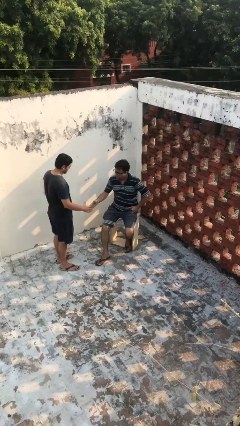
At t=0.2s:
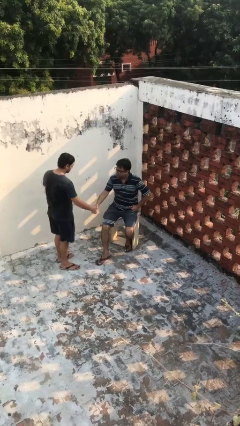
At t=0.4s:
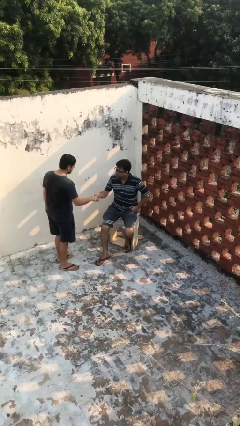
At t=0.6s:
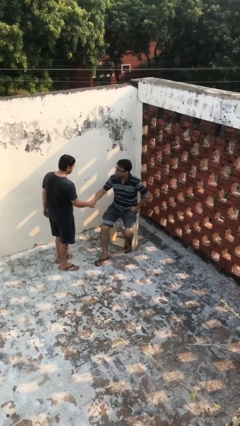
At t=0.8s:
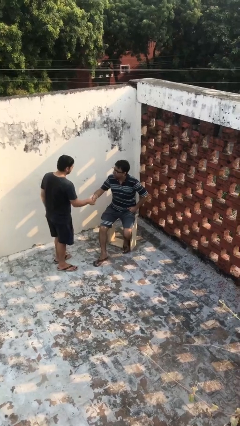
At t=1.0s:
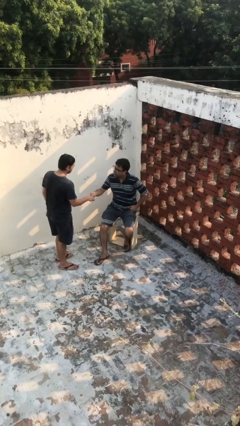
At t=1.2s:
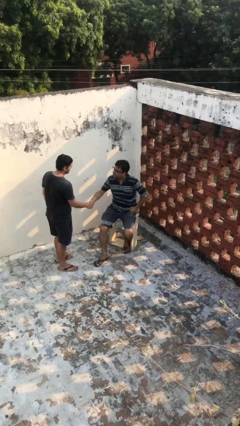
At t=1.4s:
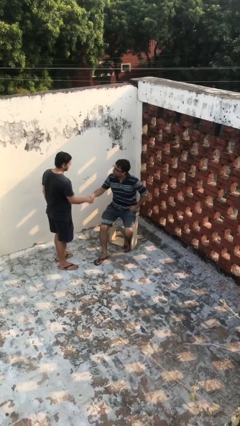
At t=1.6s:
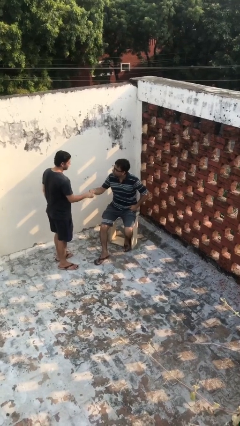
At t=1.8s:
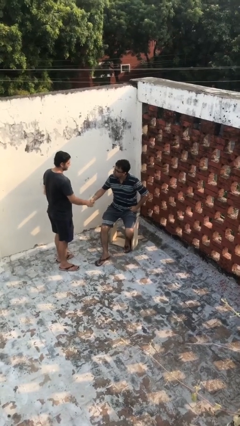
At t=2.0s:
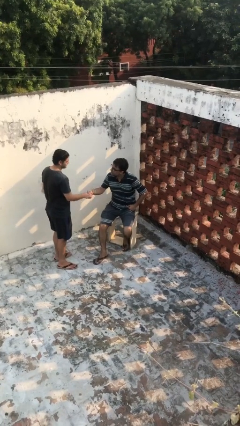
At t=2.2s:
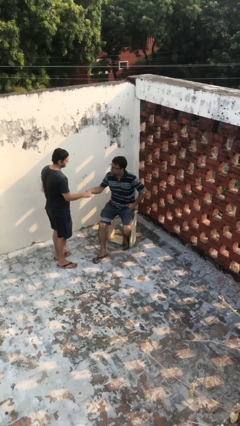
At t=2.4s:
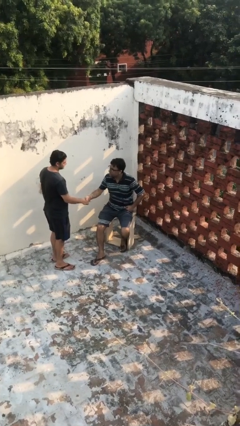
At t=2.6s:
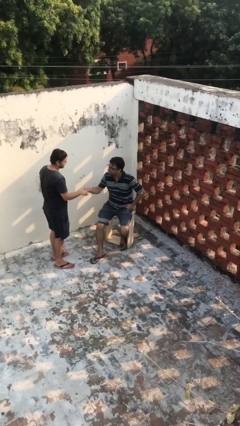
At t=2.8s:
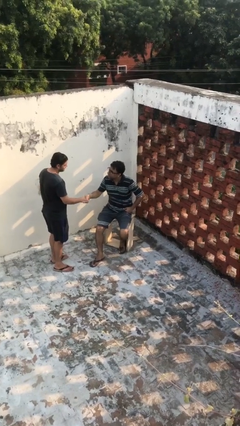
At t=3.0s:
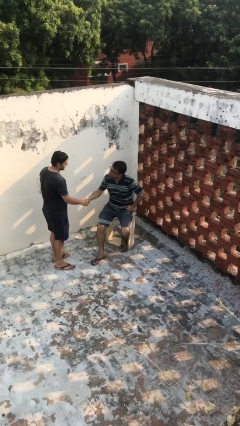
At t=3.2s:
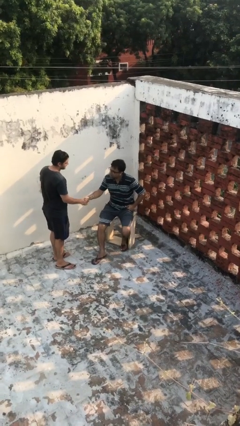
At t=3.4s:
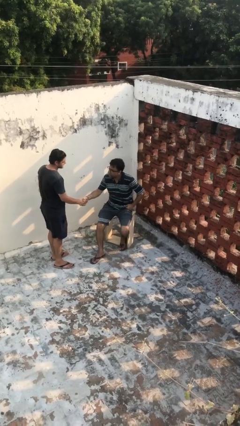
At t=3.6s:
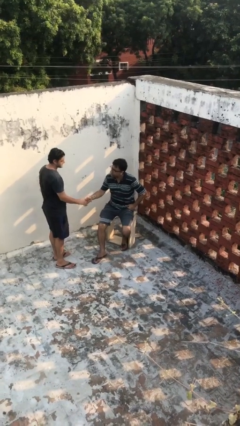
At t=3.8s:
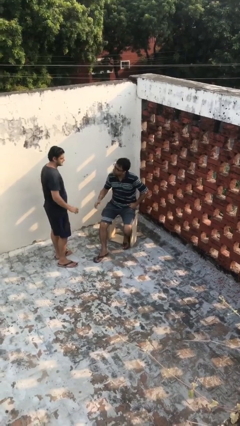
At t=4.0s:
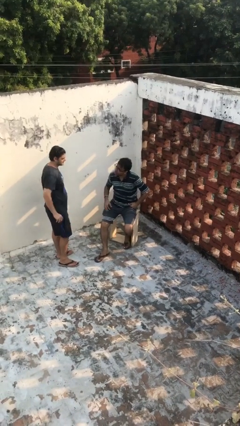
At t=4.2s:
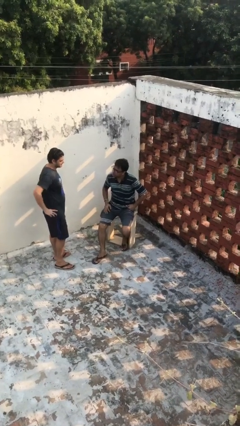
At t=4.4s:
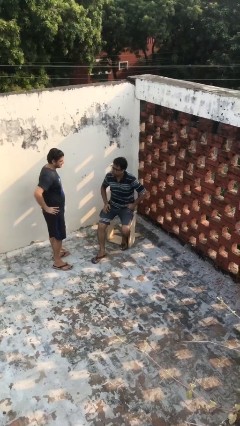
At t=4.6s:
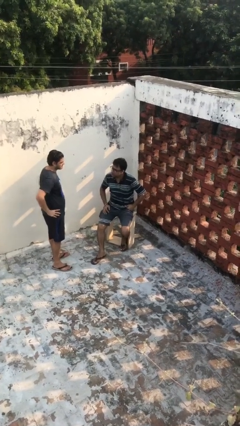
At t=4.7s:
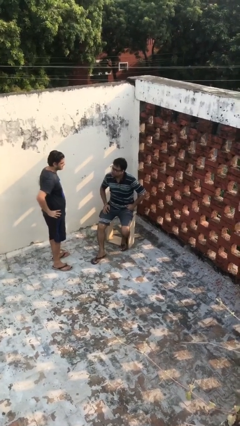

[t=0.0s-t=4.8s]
person shakes hand

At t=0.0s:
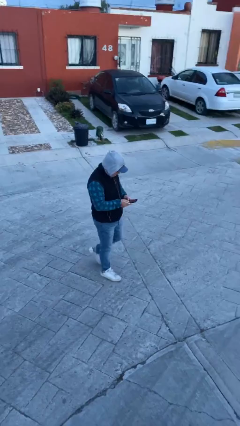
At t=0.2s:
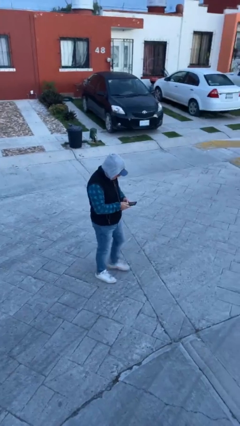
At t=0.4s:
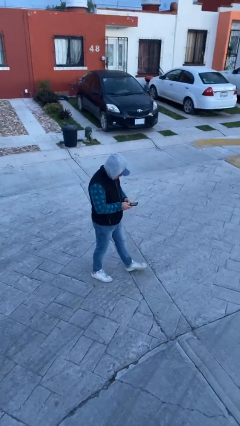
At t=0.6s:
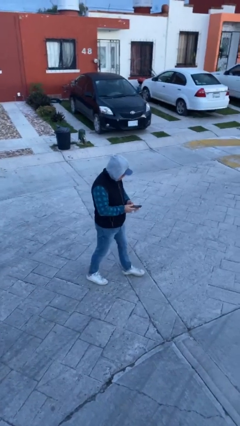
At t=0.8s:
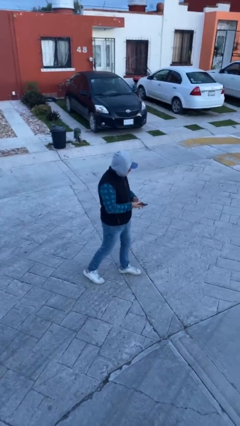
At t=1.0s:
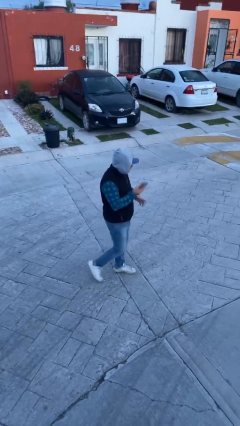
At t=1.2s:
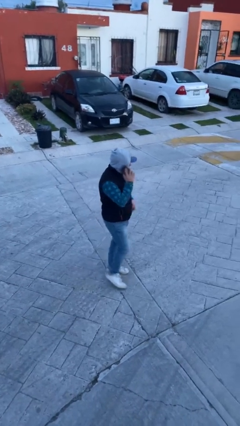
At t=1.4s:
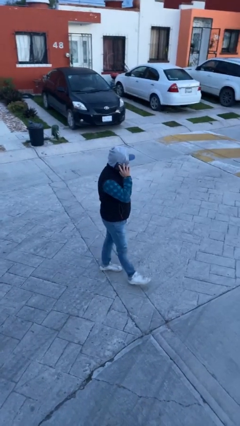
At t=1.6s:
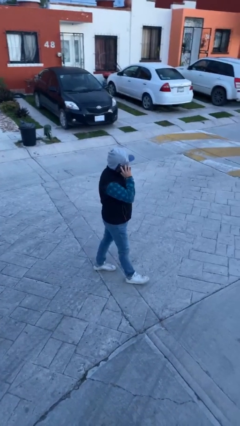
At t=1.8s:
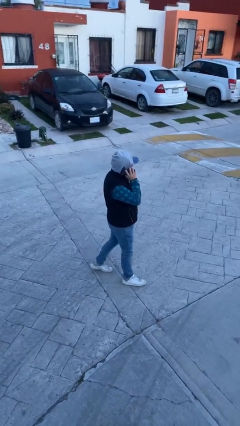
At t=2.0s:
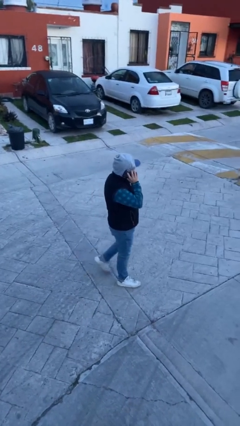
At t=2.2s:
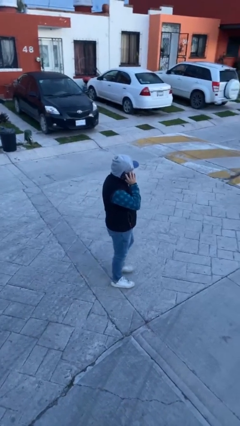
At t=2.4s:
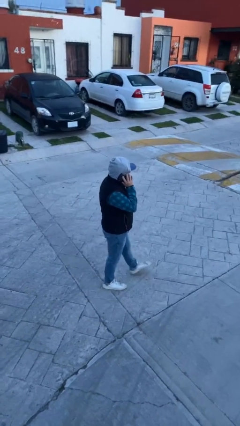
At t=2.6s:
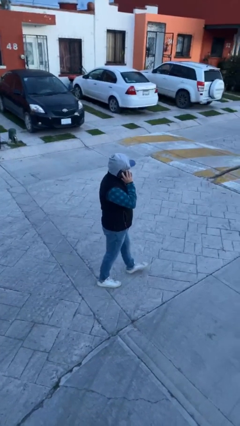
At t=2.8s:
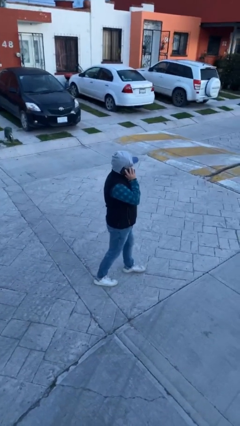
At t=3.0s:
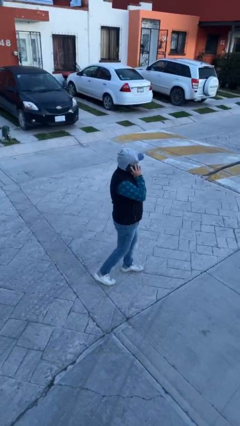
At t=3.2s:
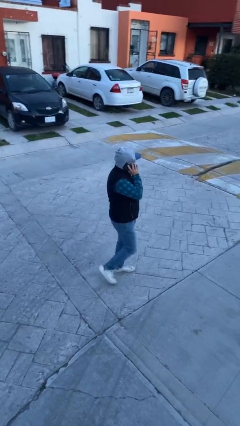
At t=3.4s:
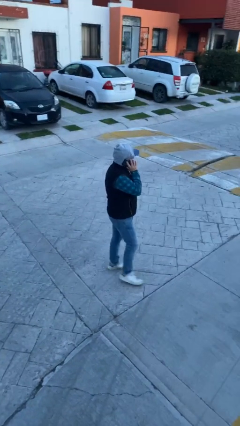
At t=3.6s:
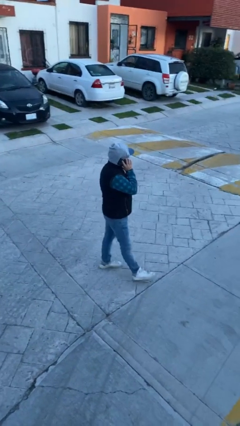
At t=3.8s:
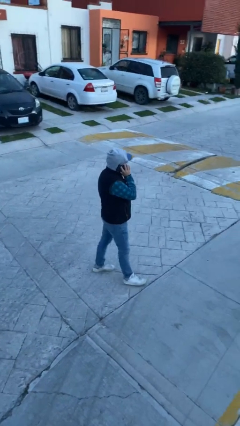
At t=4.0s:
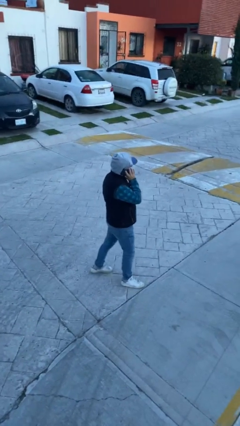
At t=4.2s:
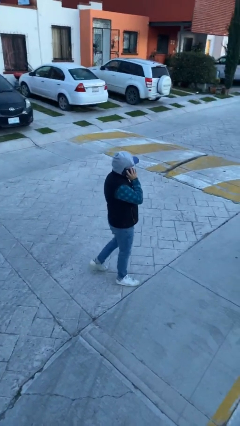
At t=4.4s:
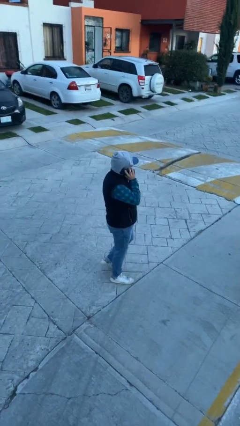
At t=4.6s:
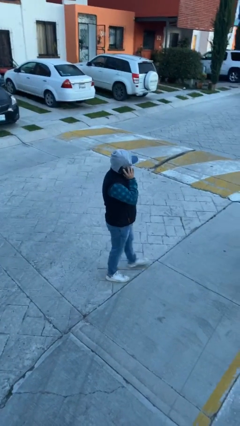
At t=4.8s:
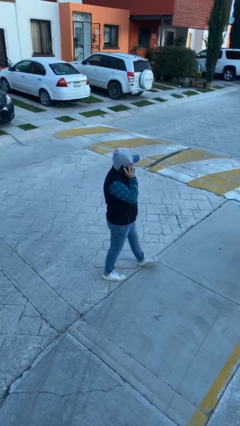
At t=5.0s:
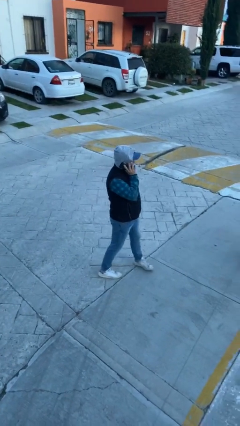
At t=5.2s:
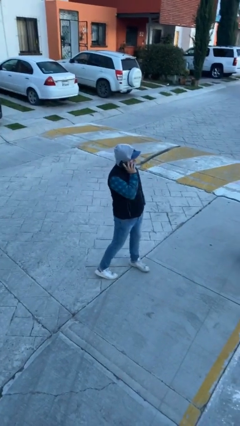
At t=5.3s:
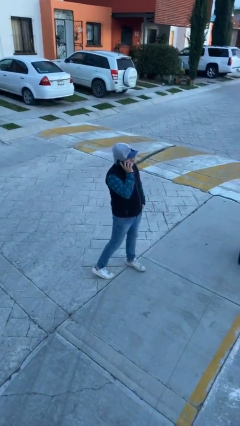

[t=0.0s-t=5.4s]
person talks on phone

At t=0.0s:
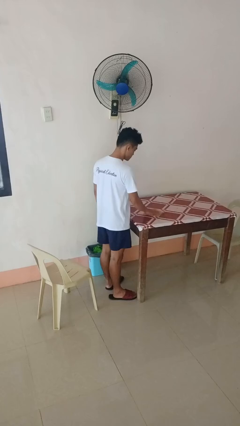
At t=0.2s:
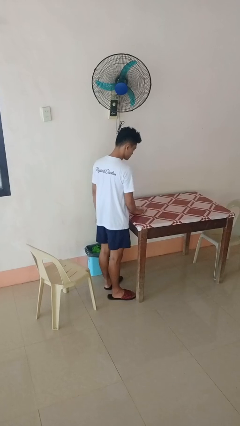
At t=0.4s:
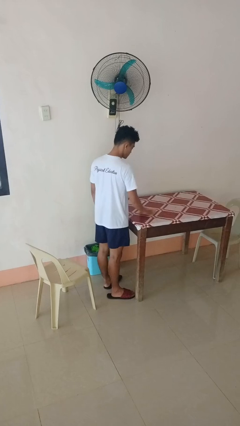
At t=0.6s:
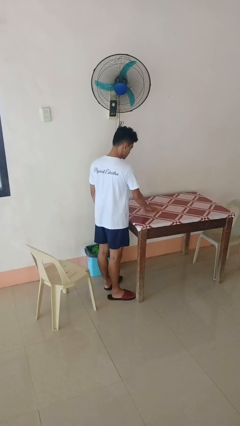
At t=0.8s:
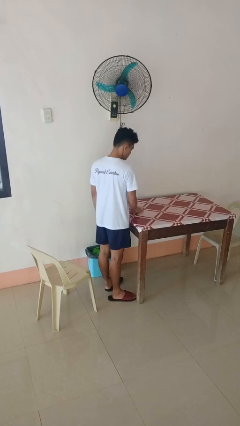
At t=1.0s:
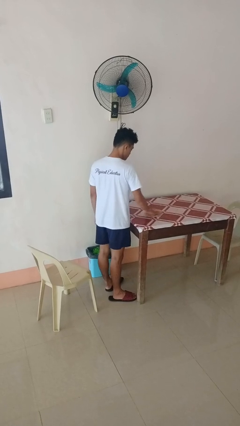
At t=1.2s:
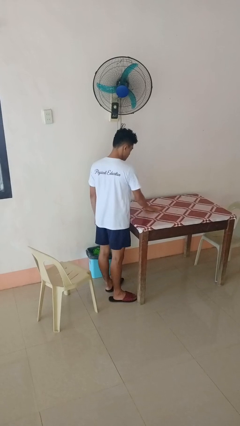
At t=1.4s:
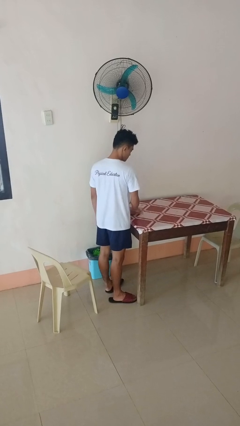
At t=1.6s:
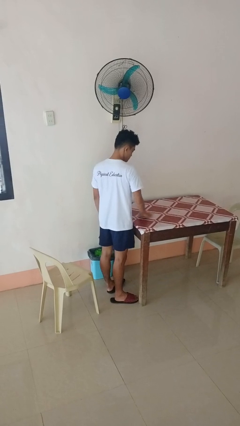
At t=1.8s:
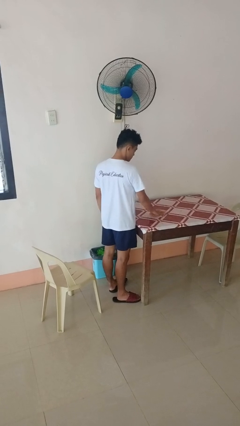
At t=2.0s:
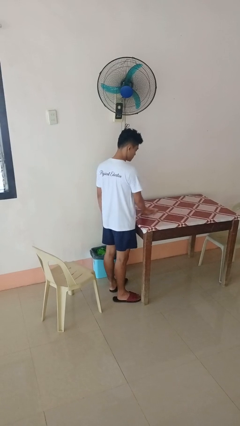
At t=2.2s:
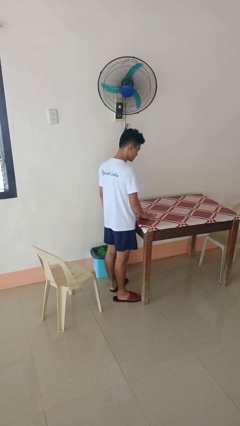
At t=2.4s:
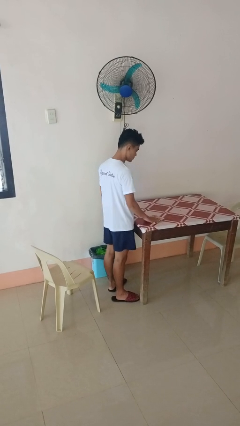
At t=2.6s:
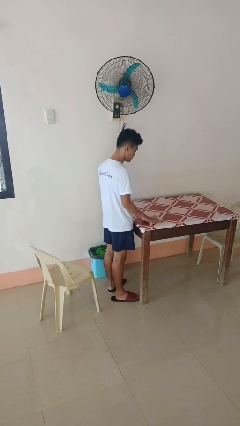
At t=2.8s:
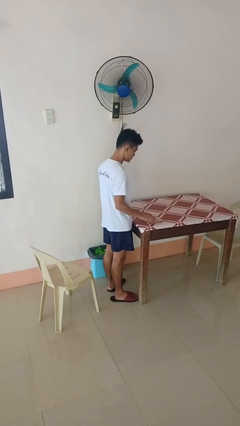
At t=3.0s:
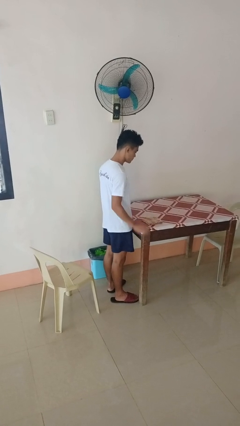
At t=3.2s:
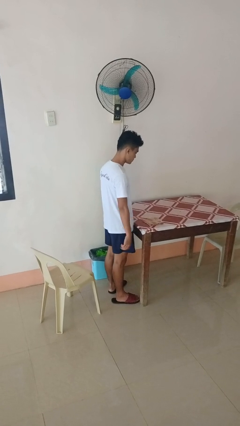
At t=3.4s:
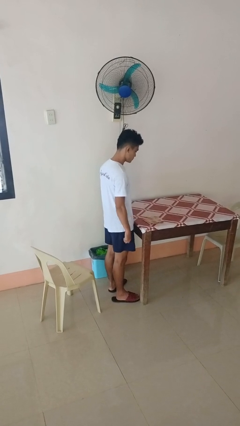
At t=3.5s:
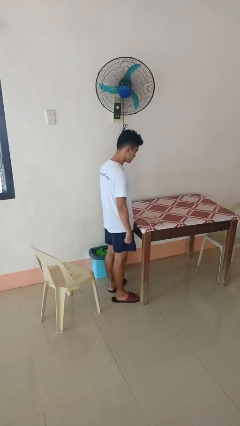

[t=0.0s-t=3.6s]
person cleans table with rag

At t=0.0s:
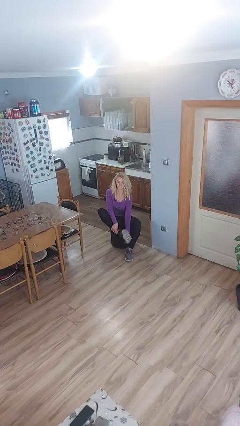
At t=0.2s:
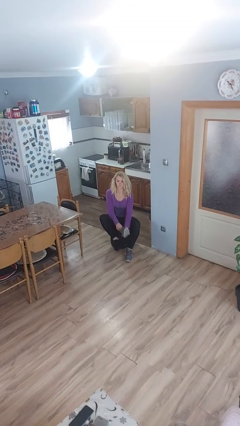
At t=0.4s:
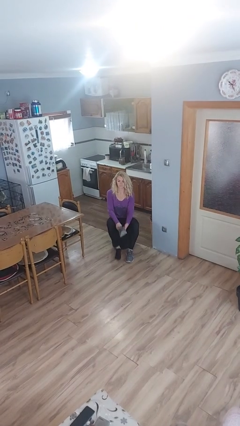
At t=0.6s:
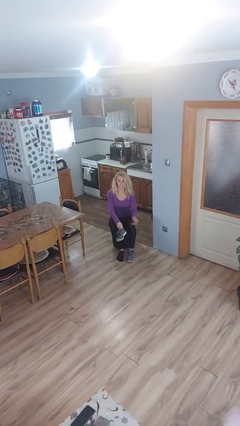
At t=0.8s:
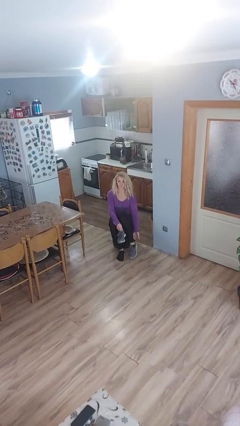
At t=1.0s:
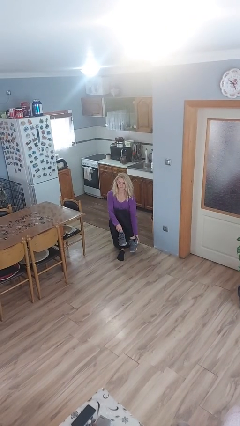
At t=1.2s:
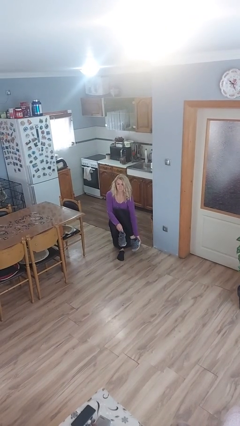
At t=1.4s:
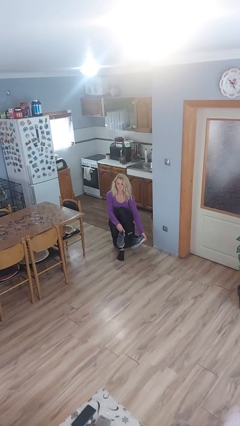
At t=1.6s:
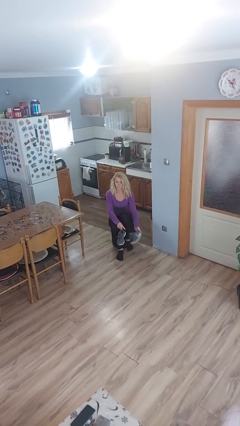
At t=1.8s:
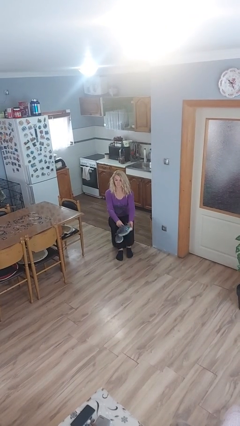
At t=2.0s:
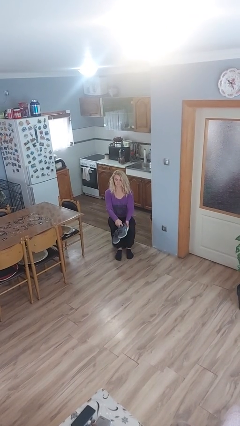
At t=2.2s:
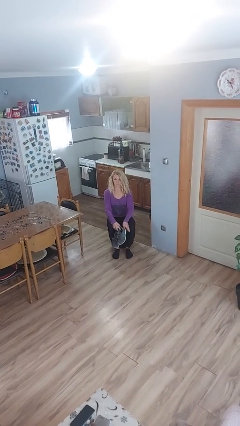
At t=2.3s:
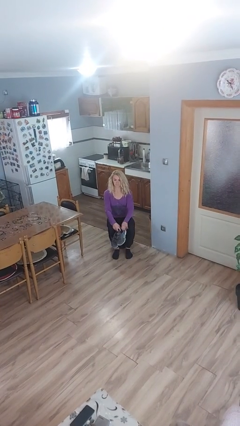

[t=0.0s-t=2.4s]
person takes off shoes

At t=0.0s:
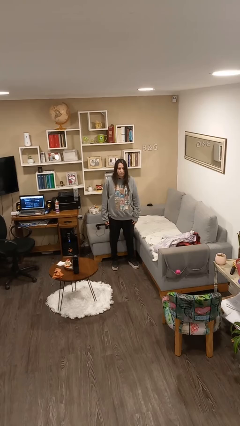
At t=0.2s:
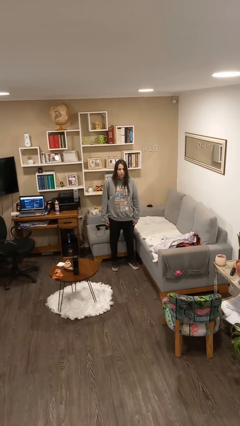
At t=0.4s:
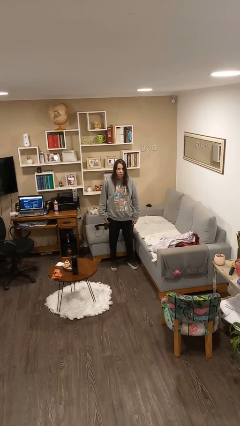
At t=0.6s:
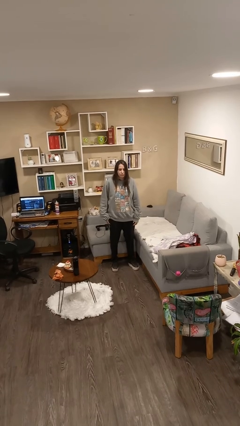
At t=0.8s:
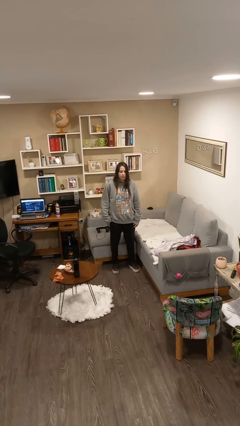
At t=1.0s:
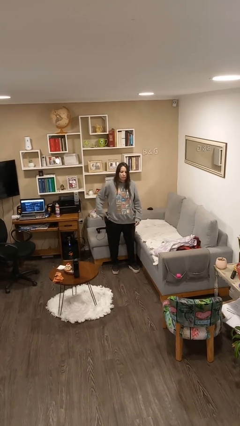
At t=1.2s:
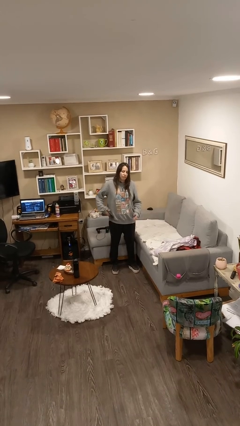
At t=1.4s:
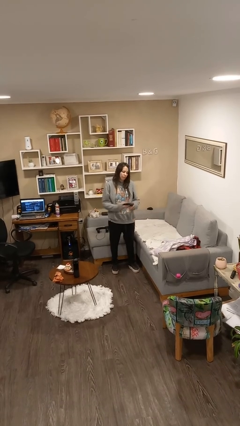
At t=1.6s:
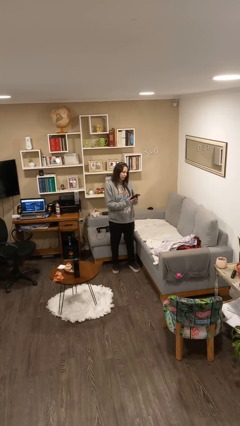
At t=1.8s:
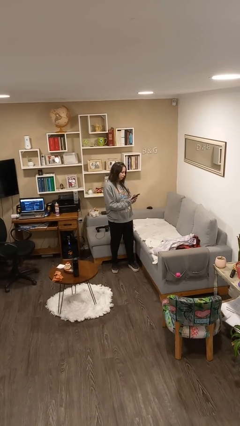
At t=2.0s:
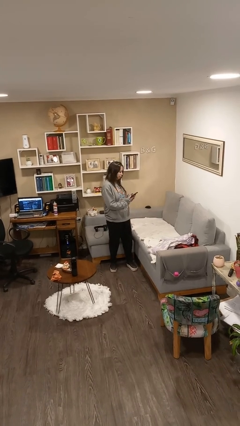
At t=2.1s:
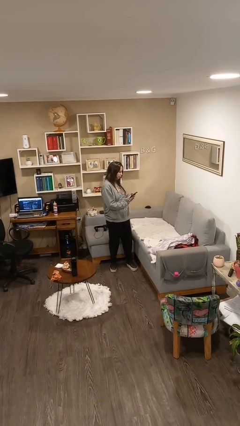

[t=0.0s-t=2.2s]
person takes phone from pocket
